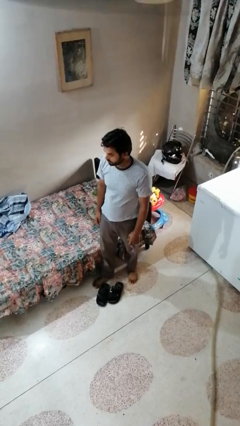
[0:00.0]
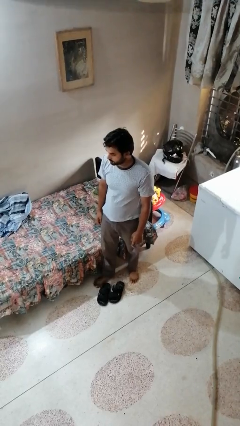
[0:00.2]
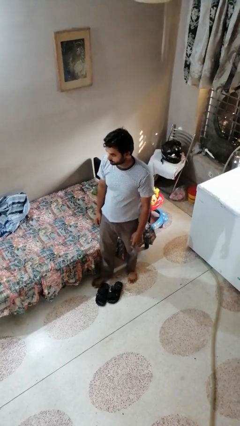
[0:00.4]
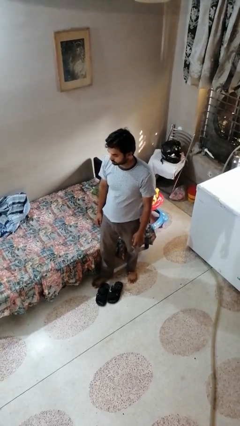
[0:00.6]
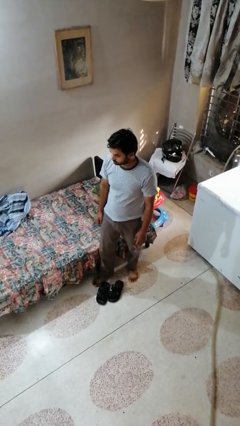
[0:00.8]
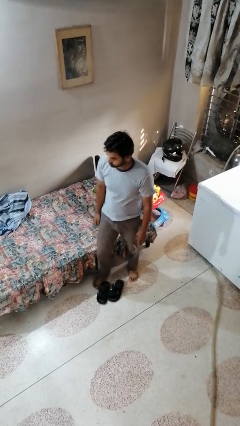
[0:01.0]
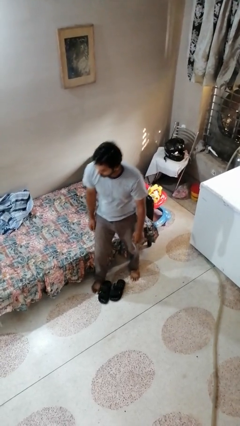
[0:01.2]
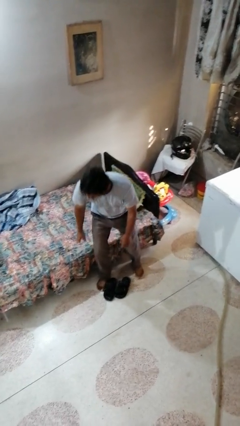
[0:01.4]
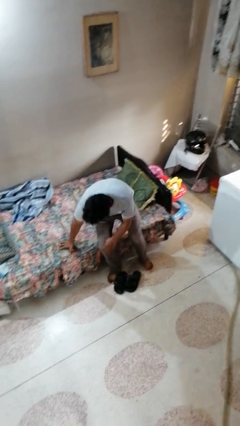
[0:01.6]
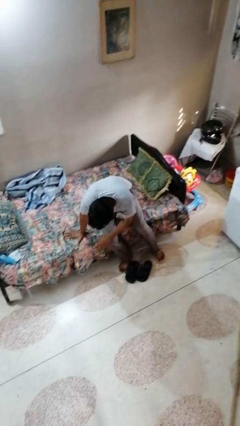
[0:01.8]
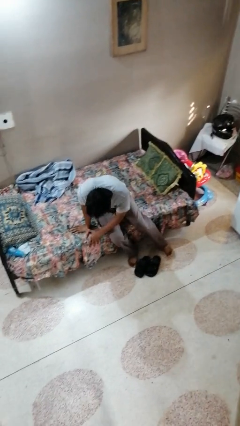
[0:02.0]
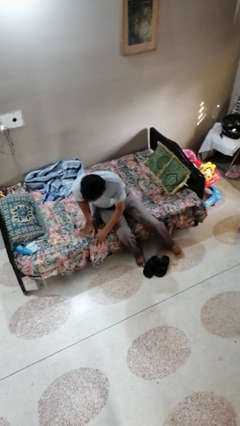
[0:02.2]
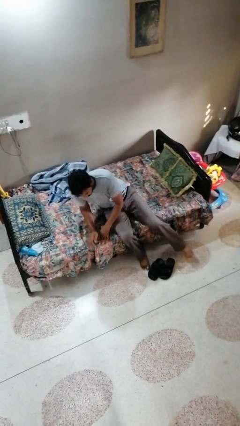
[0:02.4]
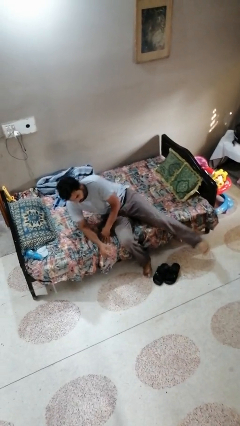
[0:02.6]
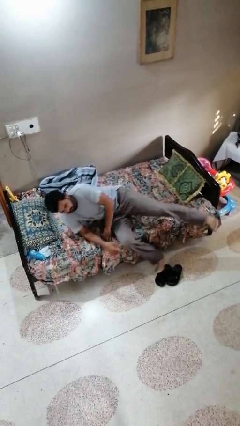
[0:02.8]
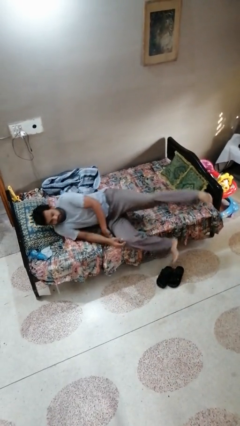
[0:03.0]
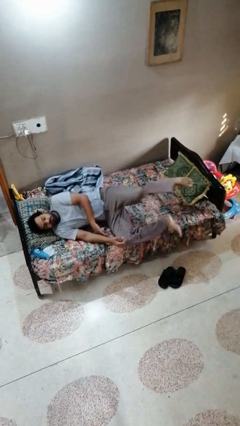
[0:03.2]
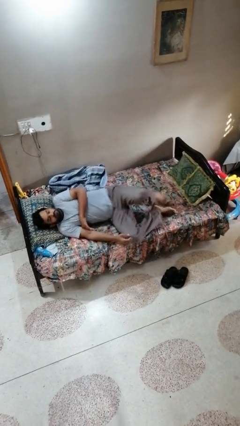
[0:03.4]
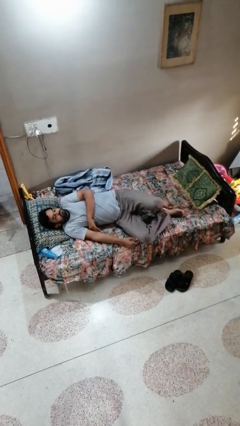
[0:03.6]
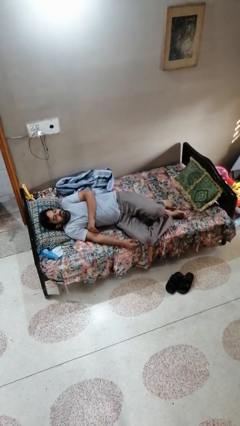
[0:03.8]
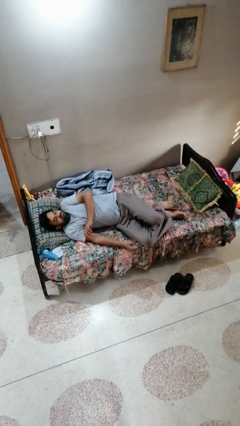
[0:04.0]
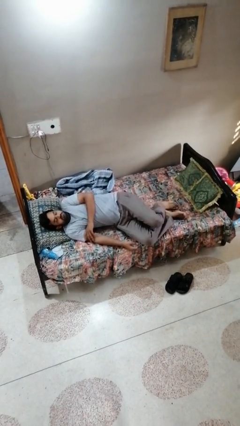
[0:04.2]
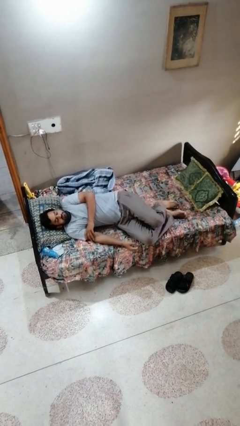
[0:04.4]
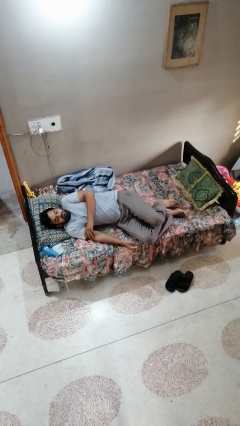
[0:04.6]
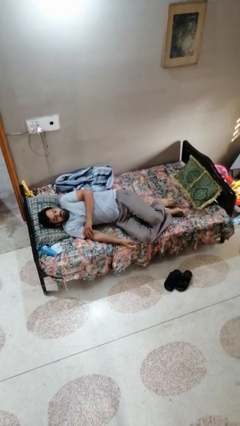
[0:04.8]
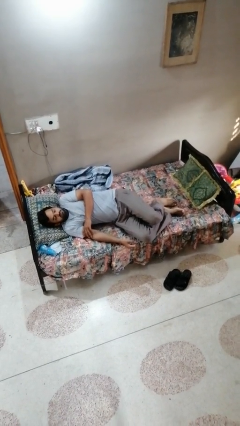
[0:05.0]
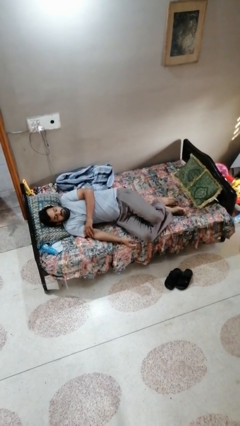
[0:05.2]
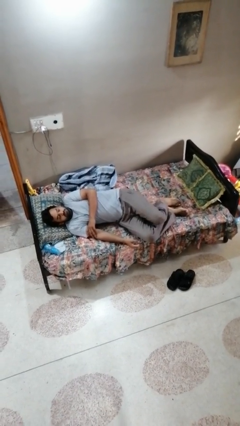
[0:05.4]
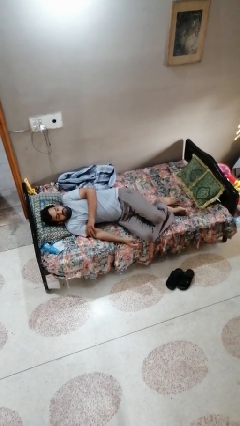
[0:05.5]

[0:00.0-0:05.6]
person lies down on bed

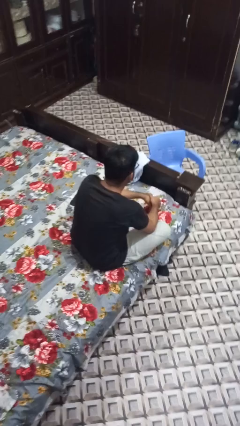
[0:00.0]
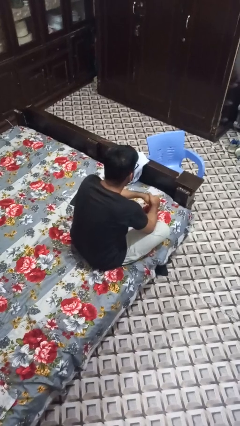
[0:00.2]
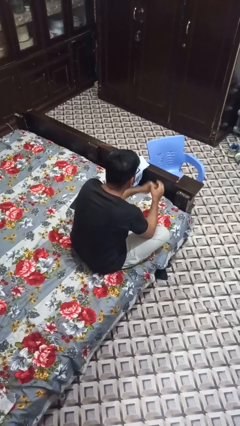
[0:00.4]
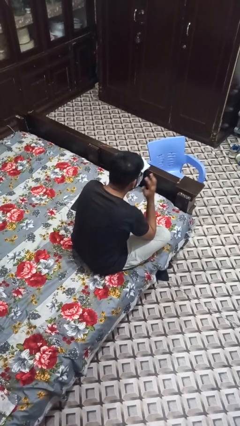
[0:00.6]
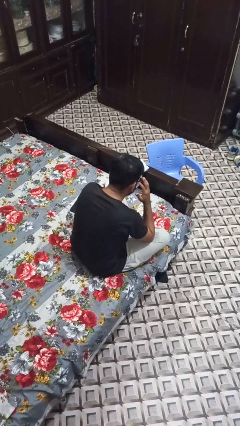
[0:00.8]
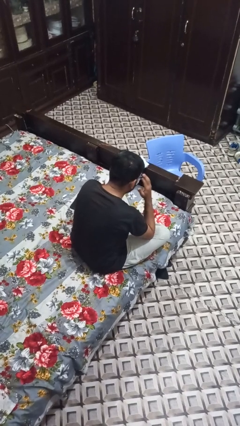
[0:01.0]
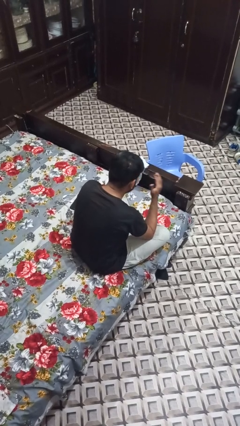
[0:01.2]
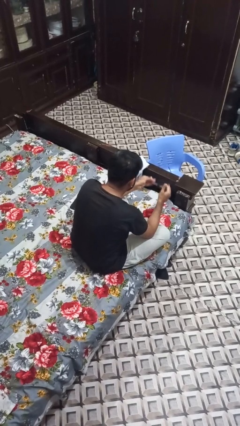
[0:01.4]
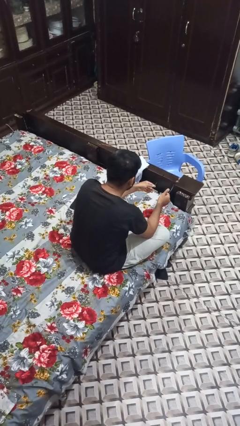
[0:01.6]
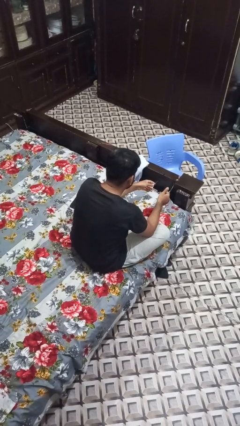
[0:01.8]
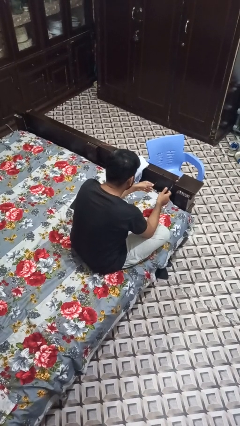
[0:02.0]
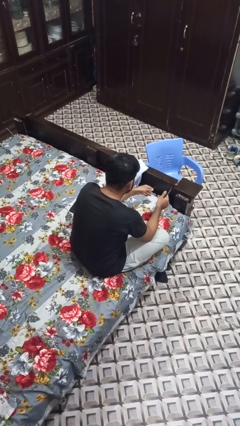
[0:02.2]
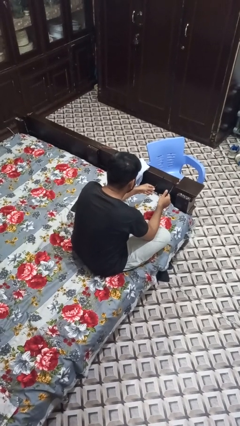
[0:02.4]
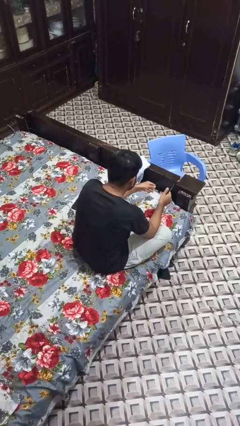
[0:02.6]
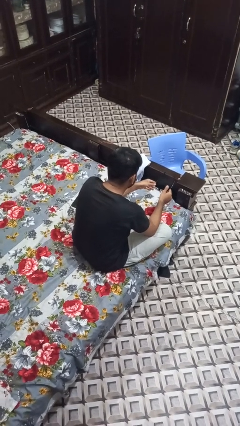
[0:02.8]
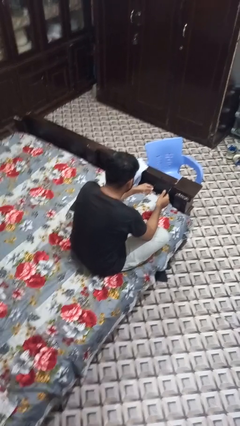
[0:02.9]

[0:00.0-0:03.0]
person takes off glasses

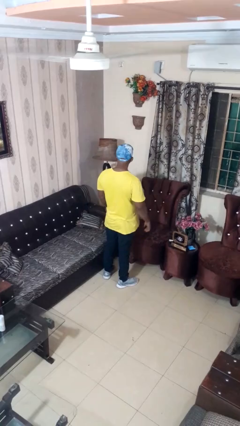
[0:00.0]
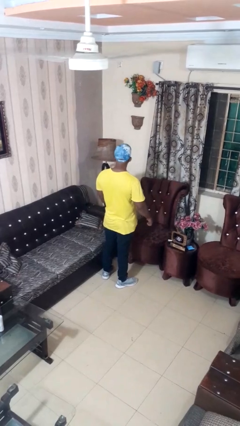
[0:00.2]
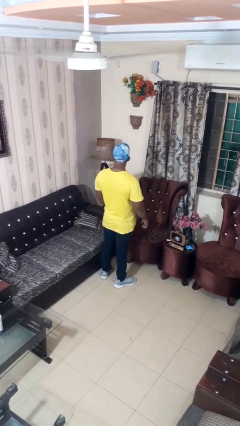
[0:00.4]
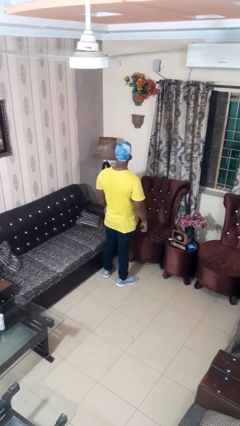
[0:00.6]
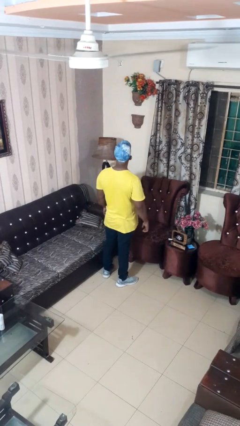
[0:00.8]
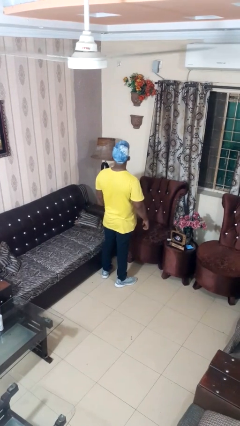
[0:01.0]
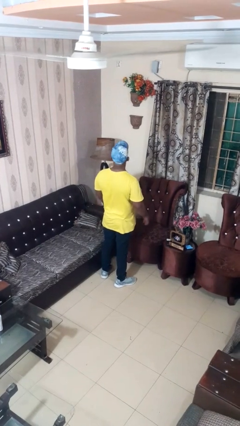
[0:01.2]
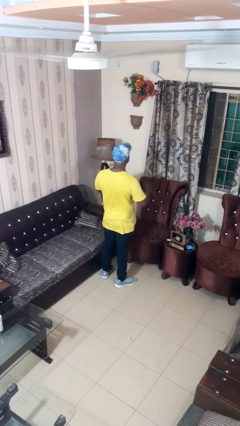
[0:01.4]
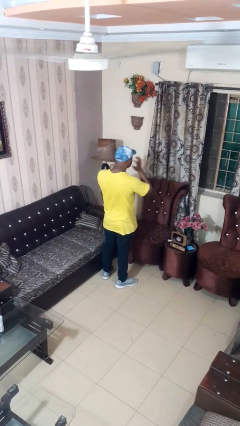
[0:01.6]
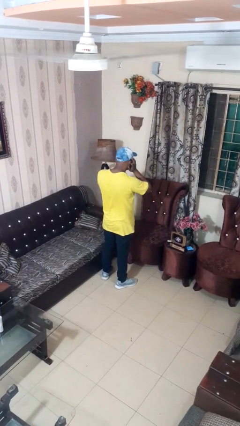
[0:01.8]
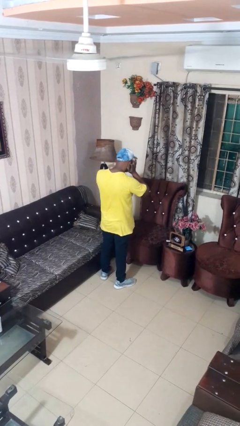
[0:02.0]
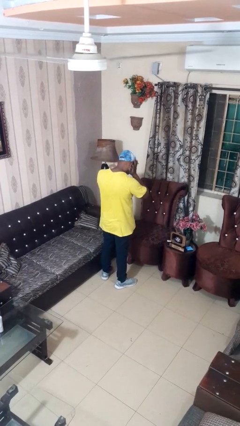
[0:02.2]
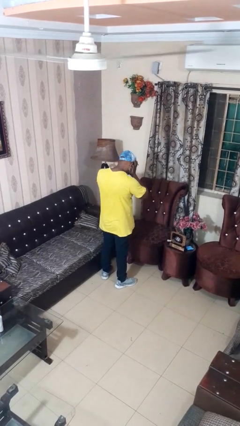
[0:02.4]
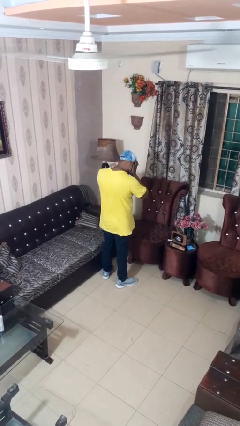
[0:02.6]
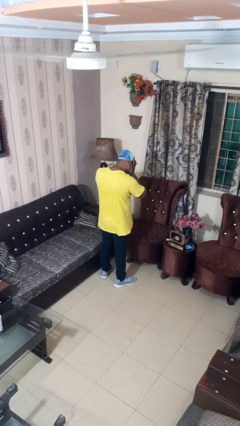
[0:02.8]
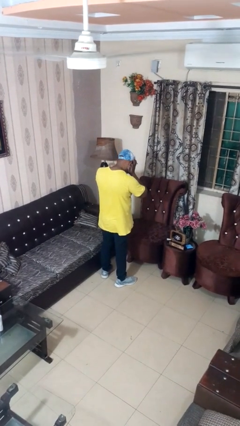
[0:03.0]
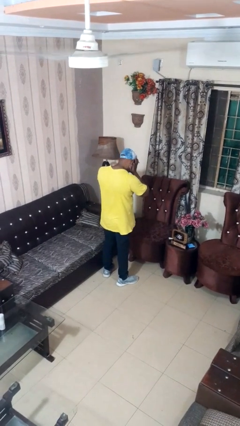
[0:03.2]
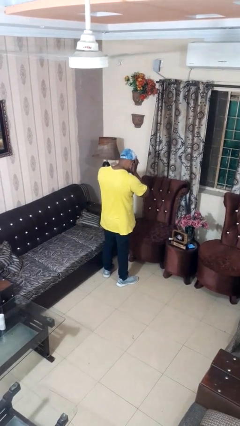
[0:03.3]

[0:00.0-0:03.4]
person puts fingers in ear

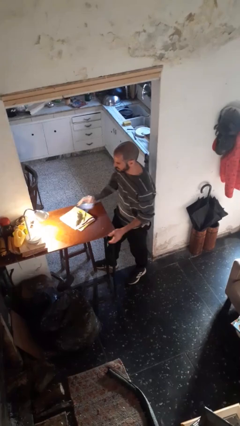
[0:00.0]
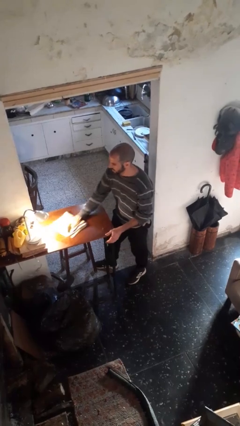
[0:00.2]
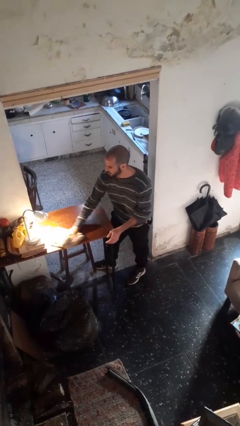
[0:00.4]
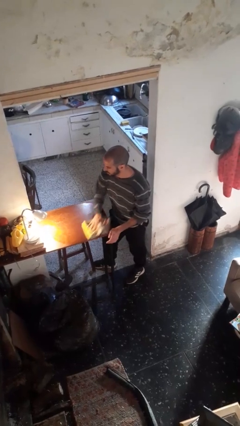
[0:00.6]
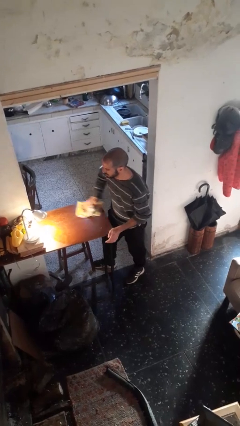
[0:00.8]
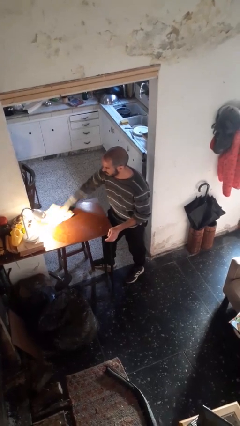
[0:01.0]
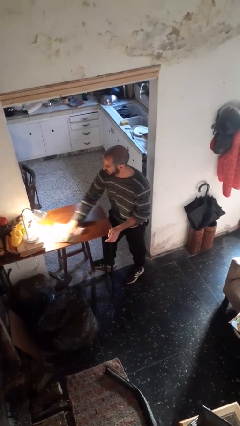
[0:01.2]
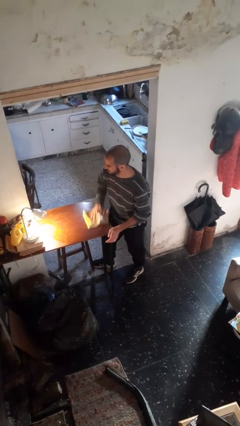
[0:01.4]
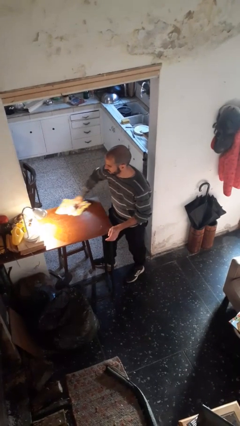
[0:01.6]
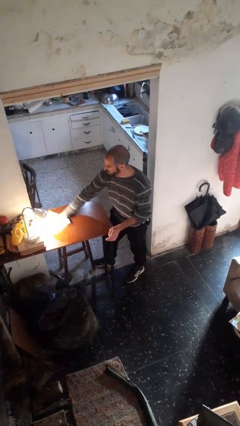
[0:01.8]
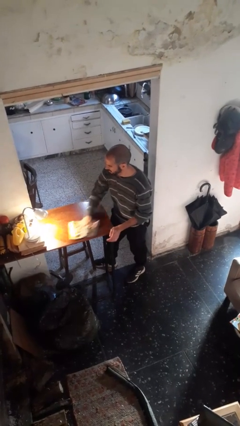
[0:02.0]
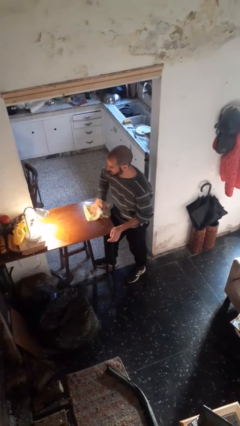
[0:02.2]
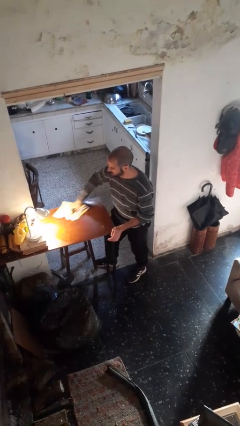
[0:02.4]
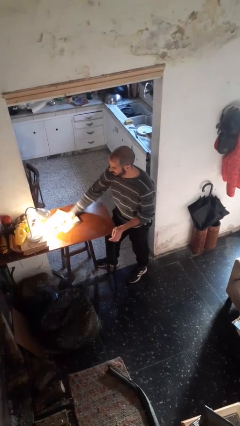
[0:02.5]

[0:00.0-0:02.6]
person cleans table with rag

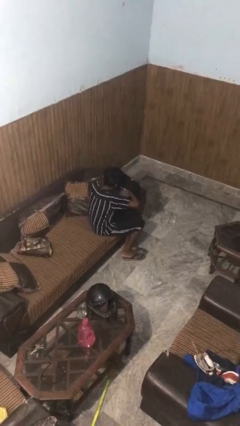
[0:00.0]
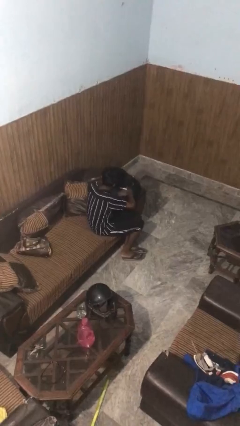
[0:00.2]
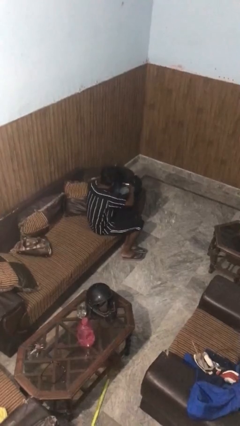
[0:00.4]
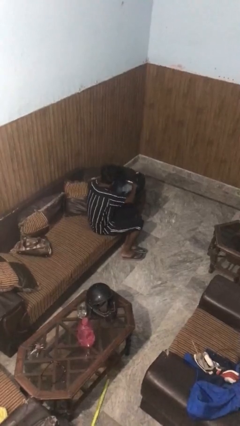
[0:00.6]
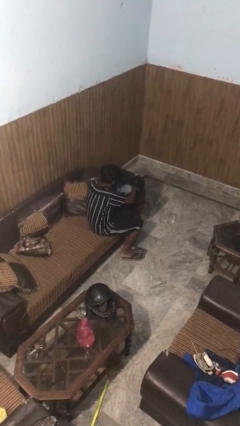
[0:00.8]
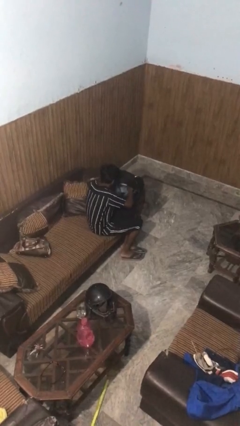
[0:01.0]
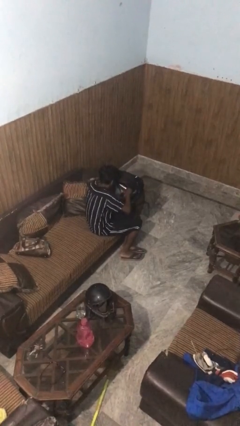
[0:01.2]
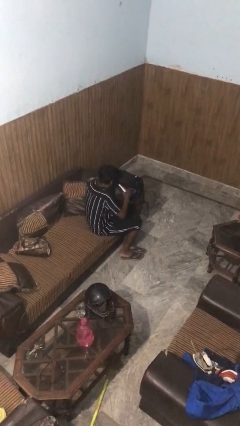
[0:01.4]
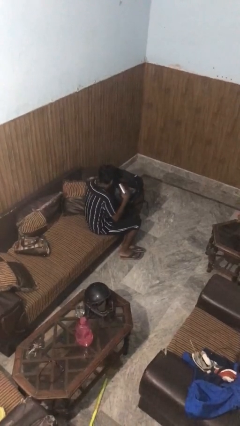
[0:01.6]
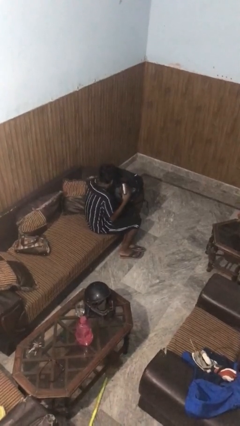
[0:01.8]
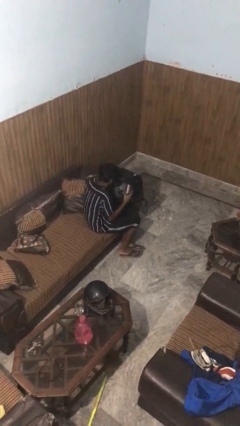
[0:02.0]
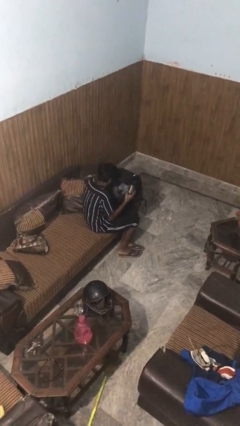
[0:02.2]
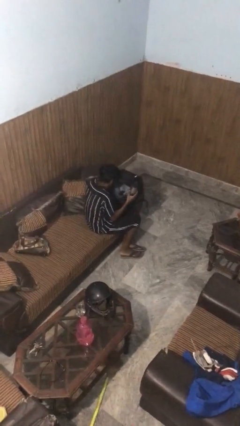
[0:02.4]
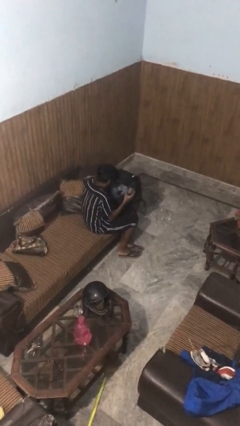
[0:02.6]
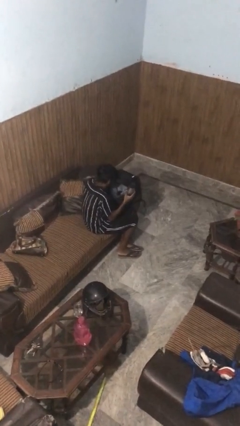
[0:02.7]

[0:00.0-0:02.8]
person takes object from backpack

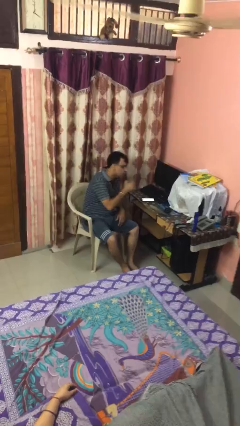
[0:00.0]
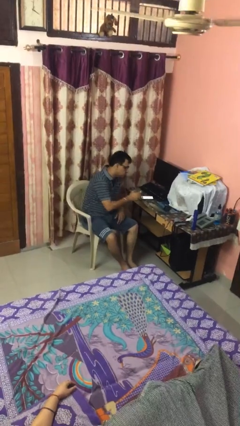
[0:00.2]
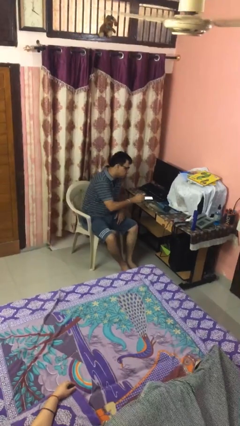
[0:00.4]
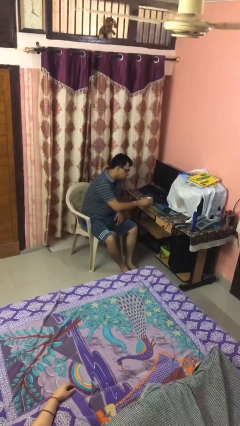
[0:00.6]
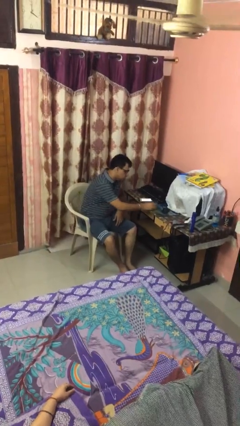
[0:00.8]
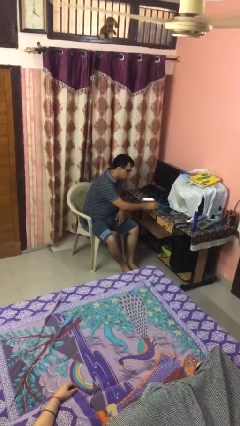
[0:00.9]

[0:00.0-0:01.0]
person puts down object on table
